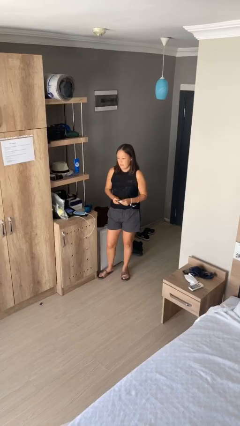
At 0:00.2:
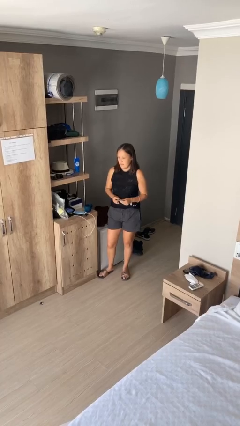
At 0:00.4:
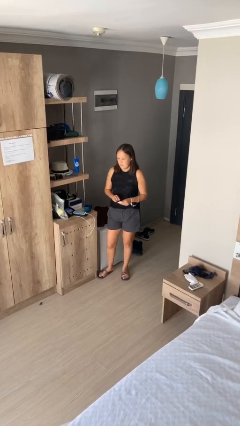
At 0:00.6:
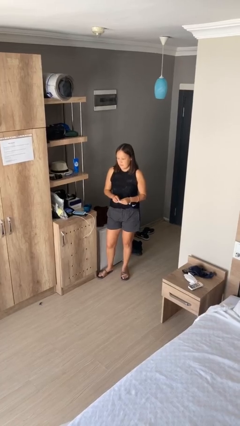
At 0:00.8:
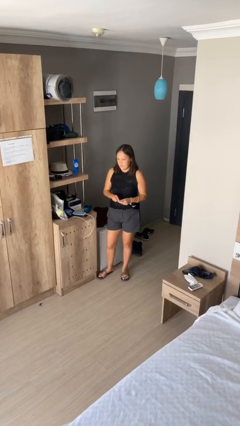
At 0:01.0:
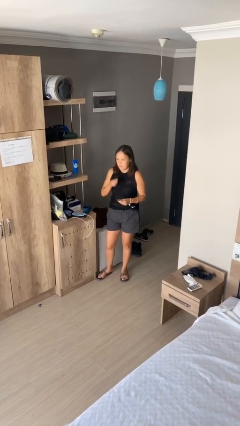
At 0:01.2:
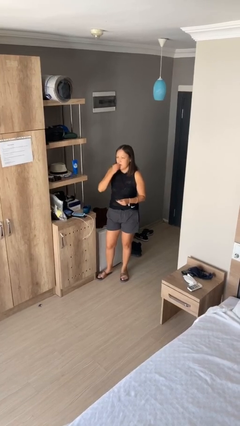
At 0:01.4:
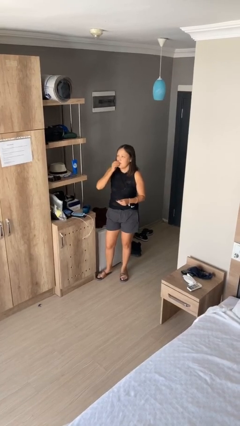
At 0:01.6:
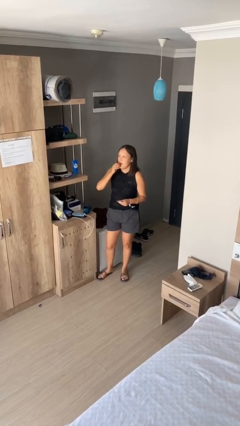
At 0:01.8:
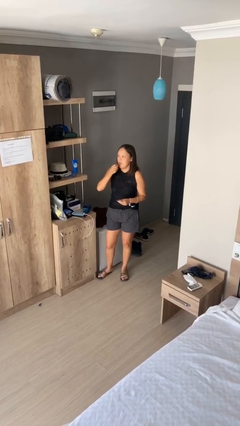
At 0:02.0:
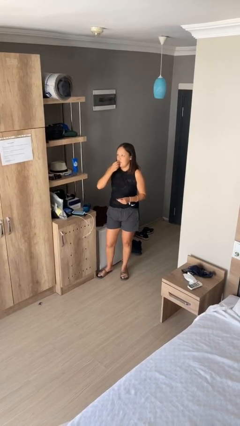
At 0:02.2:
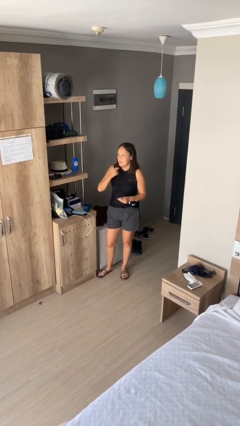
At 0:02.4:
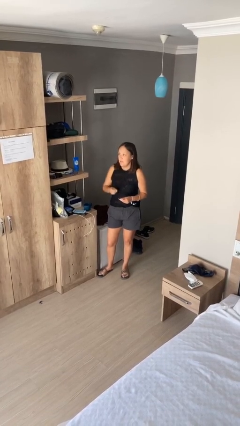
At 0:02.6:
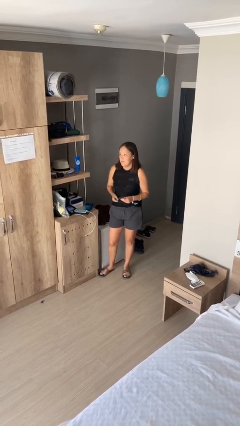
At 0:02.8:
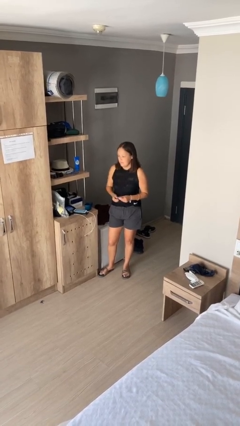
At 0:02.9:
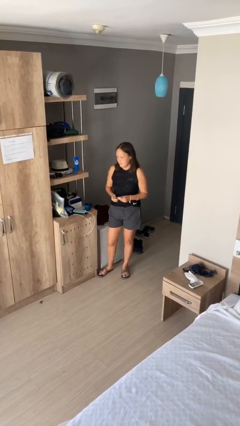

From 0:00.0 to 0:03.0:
person takes medicine pills

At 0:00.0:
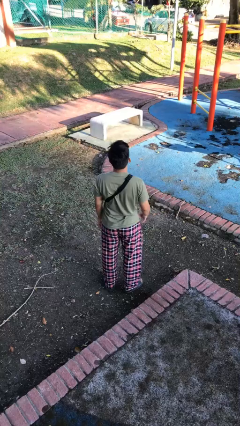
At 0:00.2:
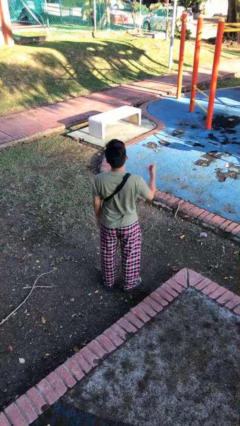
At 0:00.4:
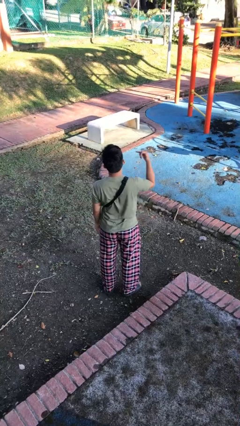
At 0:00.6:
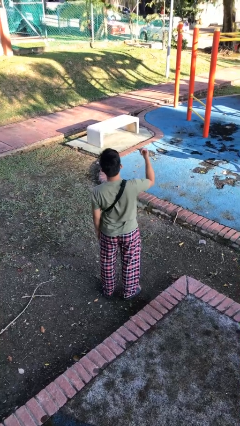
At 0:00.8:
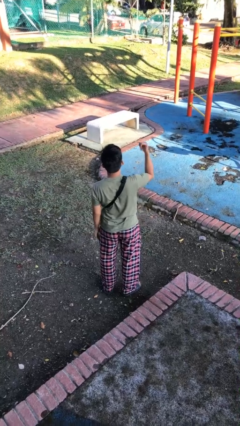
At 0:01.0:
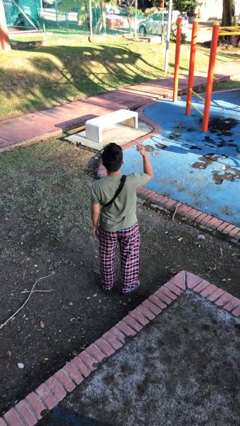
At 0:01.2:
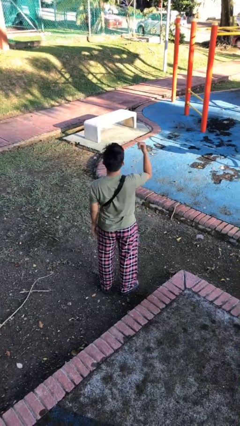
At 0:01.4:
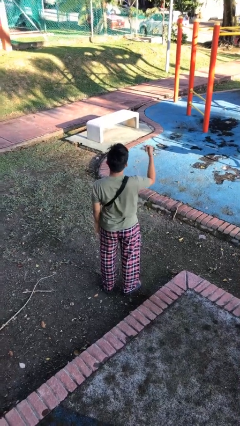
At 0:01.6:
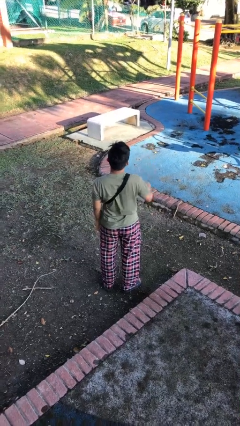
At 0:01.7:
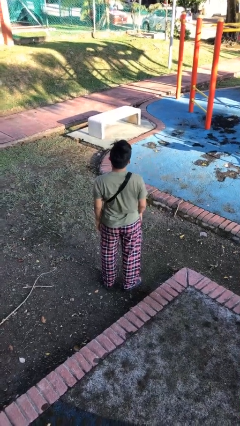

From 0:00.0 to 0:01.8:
person gestures hang loose

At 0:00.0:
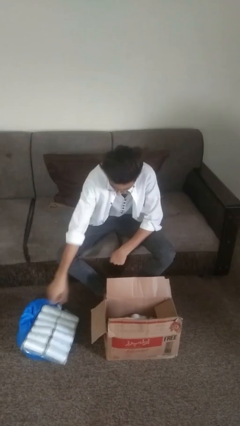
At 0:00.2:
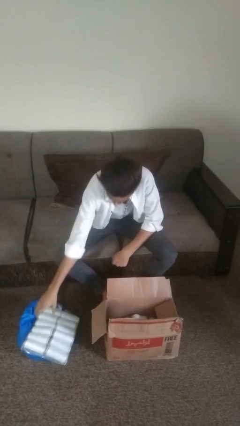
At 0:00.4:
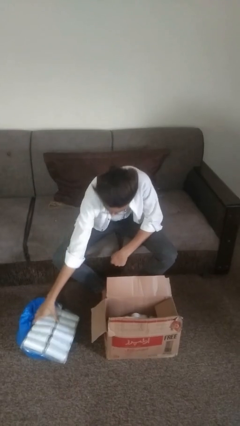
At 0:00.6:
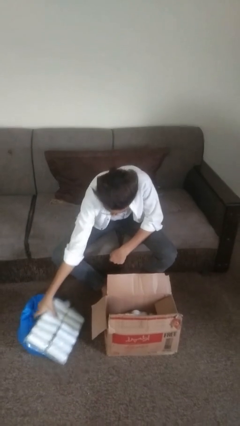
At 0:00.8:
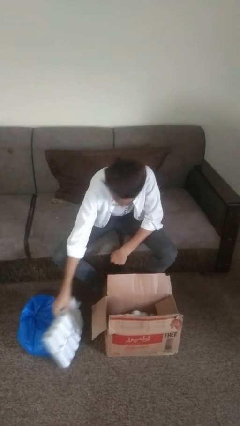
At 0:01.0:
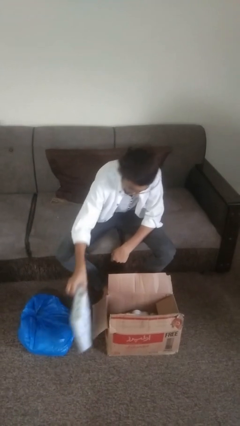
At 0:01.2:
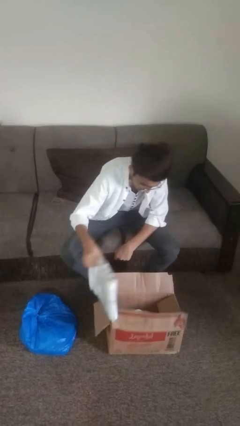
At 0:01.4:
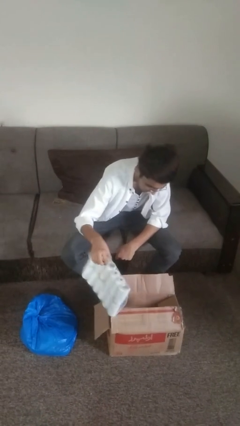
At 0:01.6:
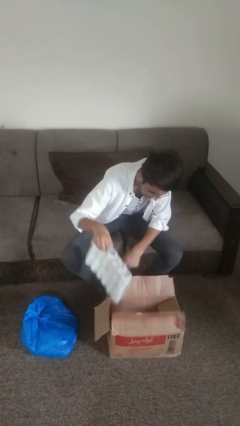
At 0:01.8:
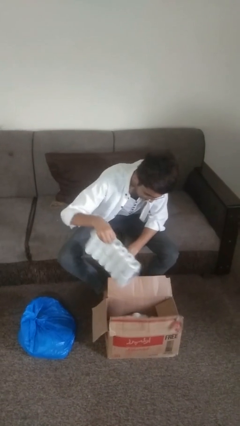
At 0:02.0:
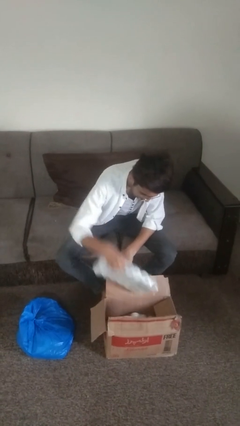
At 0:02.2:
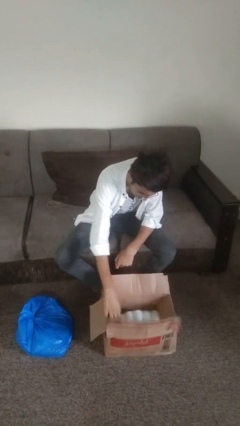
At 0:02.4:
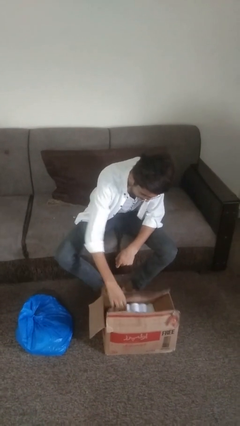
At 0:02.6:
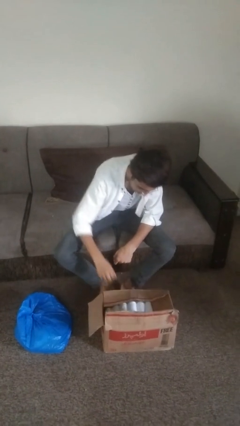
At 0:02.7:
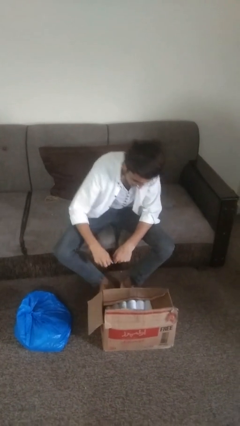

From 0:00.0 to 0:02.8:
person puts object into box

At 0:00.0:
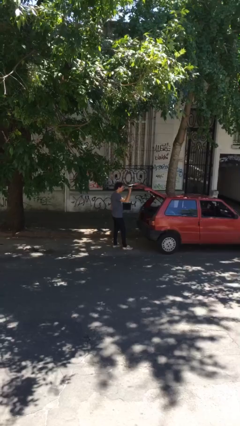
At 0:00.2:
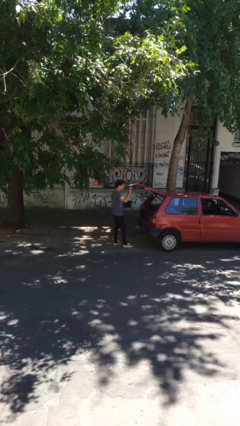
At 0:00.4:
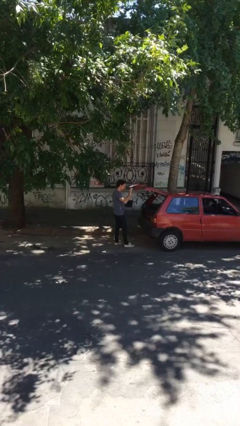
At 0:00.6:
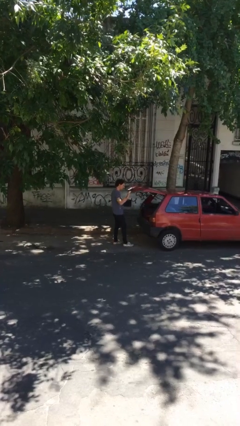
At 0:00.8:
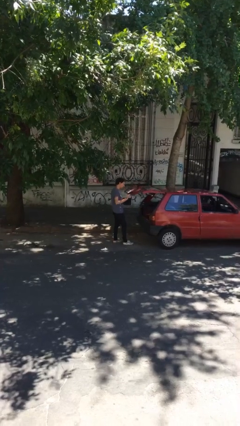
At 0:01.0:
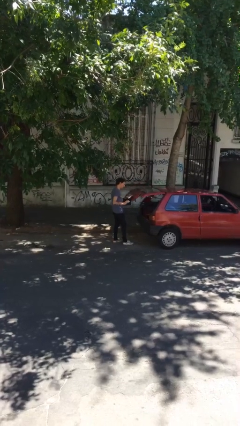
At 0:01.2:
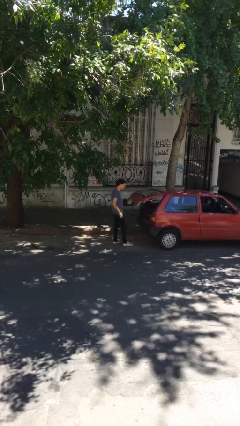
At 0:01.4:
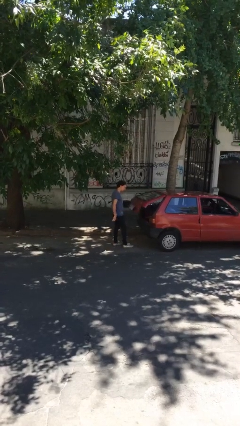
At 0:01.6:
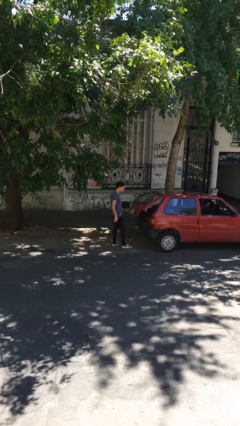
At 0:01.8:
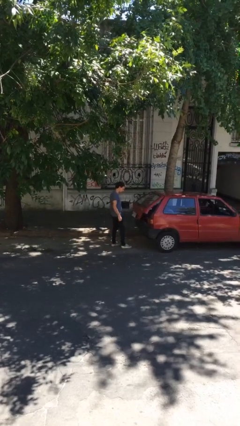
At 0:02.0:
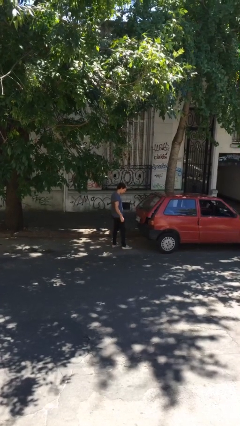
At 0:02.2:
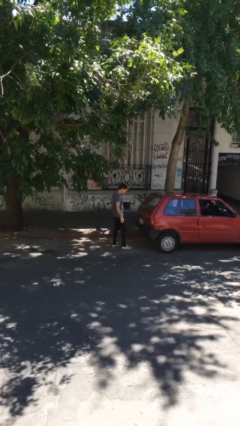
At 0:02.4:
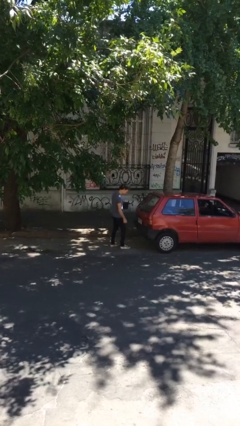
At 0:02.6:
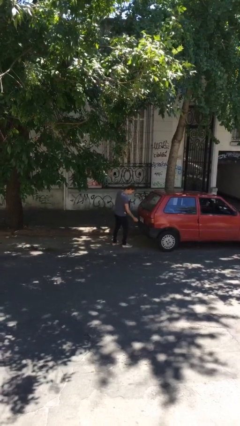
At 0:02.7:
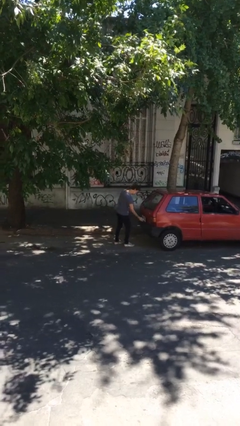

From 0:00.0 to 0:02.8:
person closes car trunk

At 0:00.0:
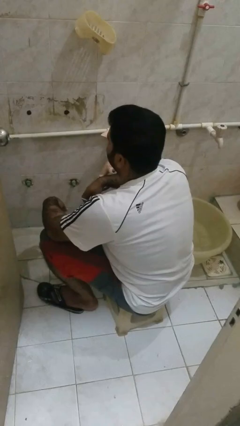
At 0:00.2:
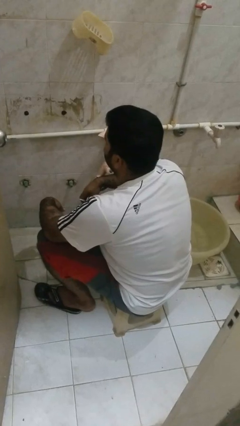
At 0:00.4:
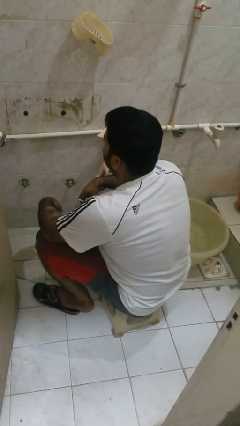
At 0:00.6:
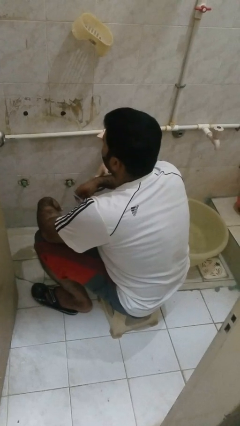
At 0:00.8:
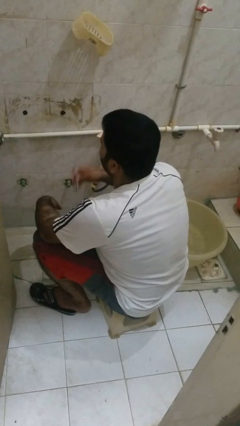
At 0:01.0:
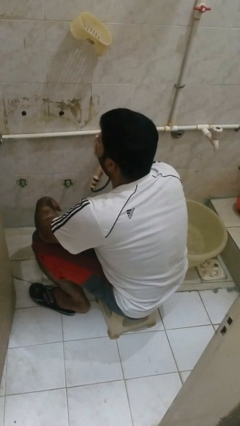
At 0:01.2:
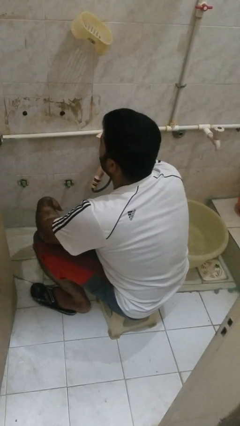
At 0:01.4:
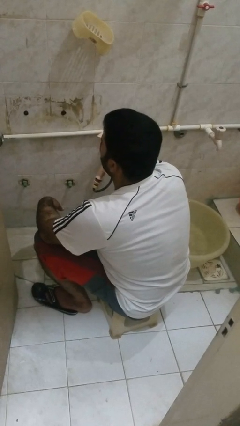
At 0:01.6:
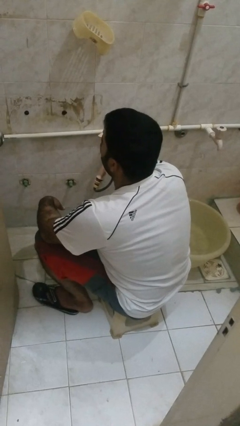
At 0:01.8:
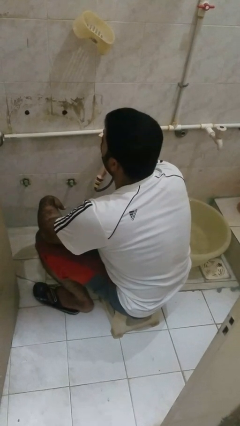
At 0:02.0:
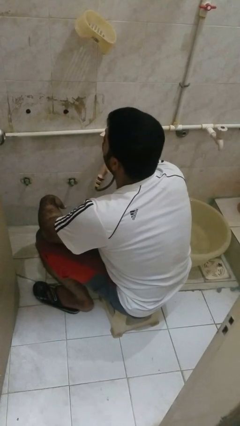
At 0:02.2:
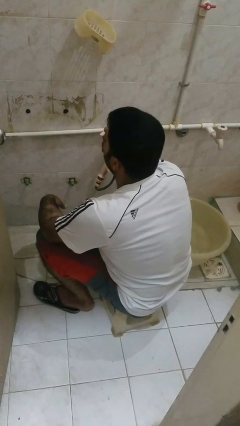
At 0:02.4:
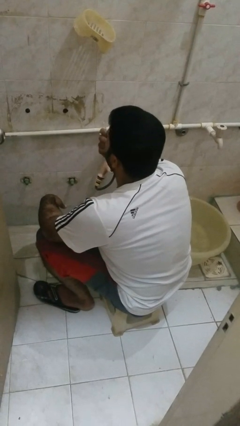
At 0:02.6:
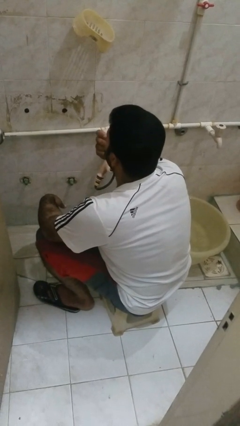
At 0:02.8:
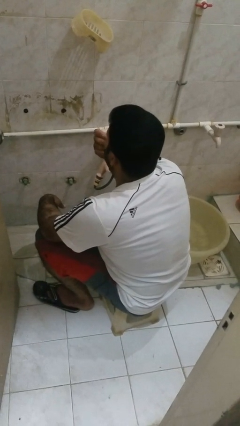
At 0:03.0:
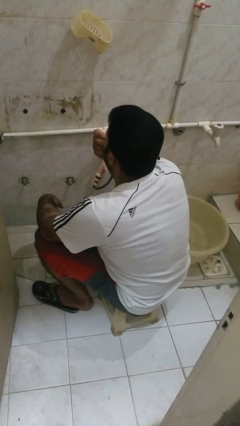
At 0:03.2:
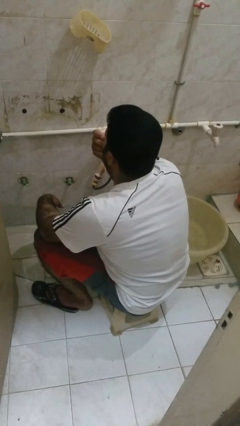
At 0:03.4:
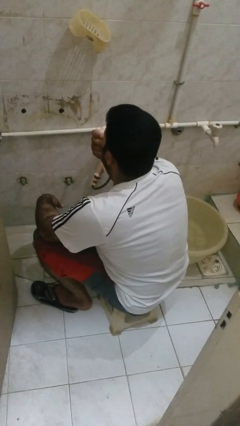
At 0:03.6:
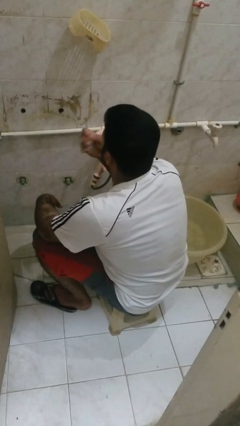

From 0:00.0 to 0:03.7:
person flosses

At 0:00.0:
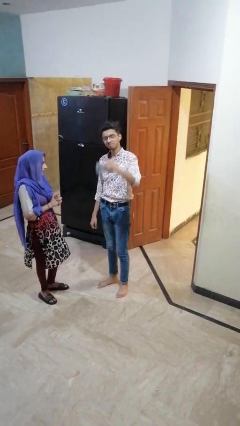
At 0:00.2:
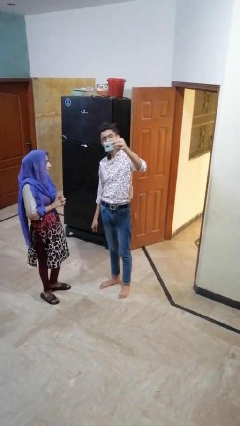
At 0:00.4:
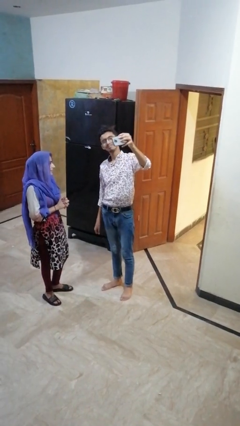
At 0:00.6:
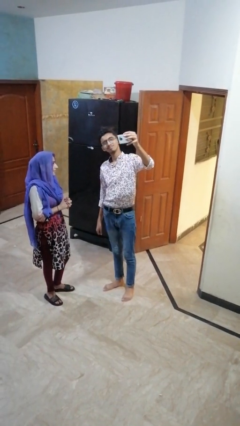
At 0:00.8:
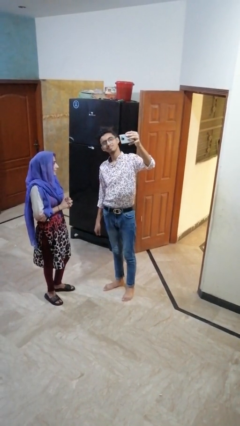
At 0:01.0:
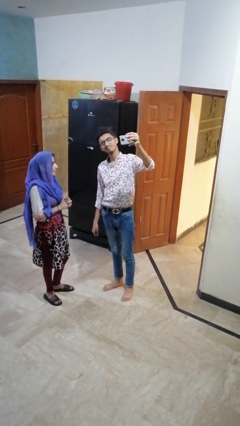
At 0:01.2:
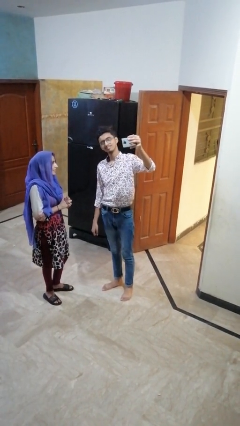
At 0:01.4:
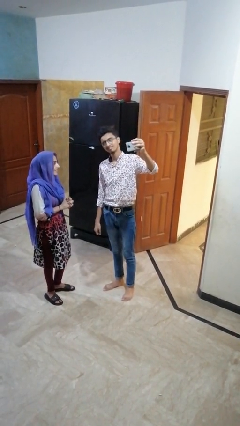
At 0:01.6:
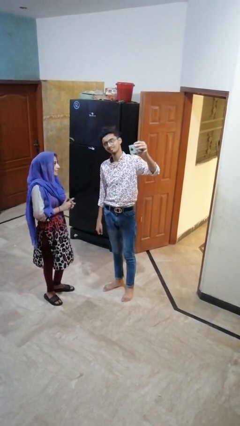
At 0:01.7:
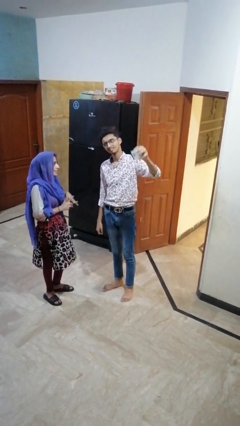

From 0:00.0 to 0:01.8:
person takes selfie with person

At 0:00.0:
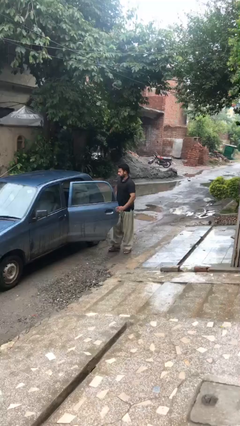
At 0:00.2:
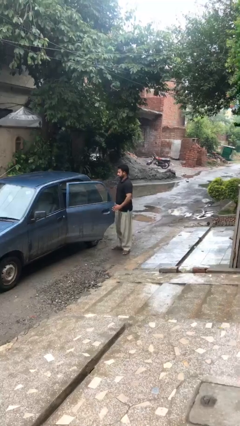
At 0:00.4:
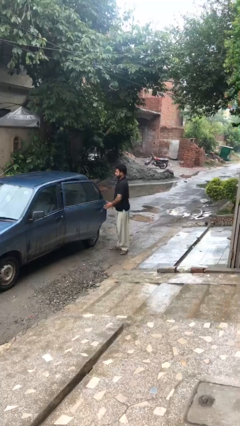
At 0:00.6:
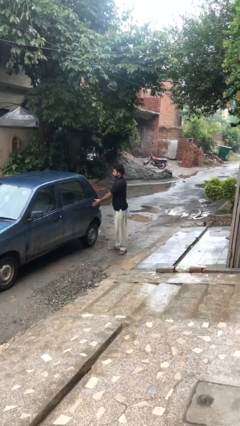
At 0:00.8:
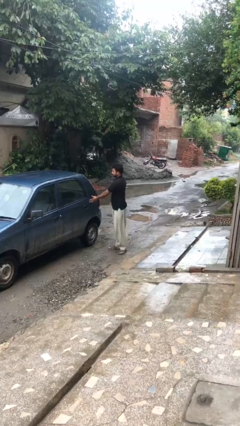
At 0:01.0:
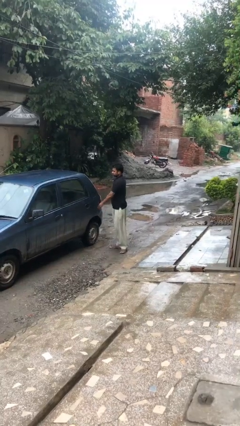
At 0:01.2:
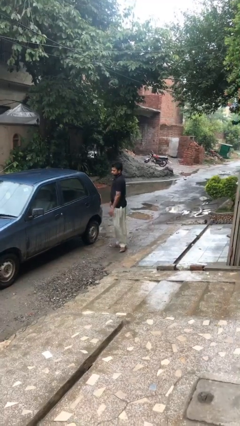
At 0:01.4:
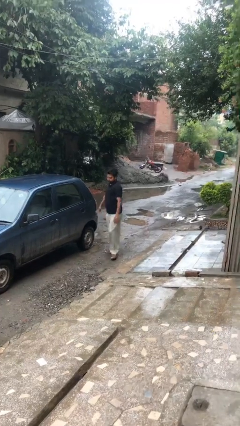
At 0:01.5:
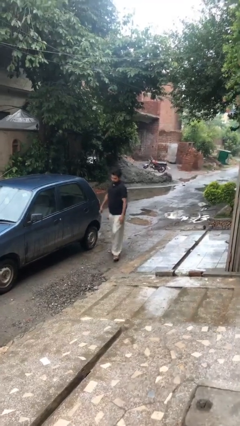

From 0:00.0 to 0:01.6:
person closes car door
